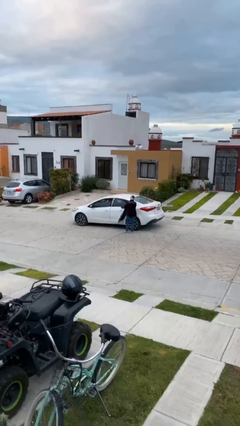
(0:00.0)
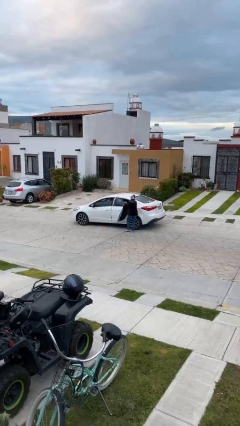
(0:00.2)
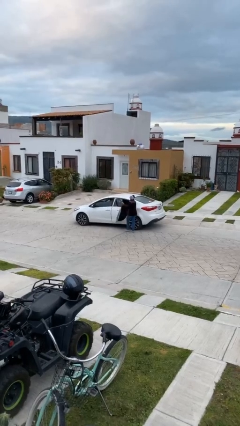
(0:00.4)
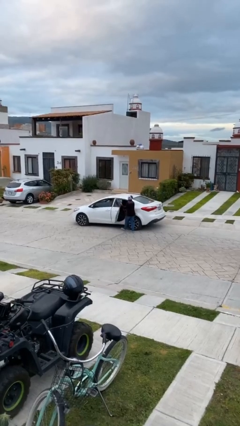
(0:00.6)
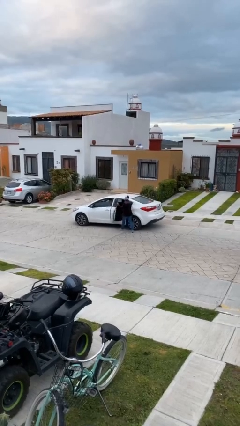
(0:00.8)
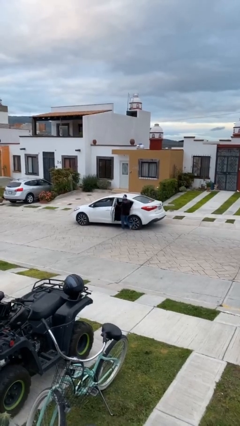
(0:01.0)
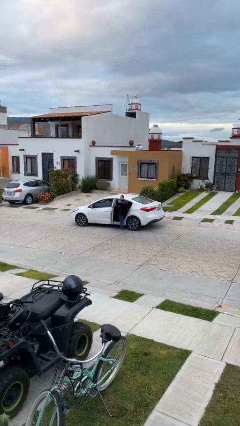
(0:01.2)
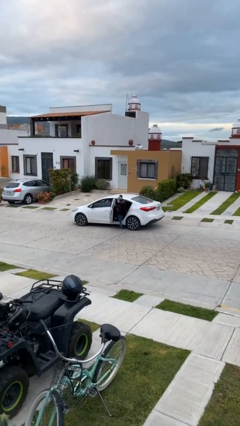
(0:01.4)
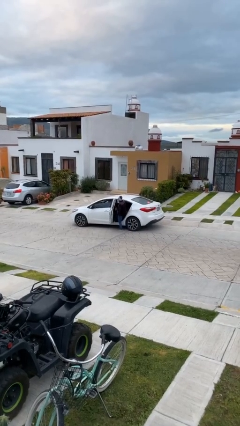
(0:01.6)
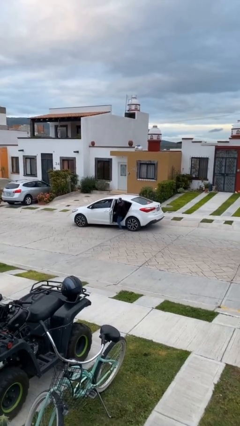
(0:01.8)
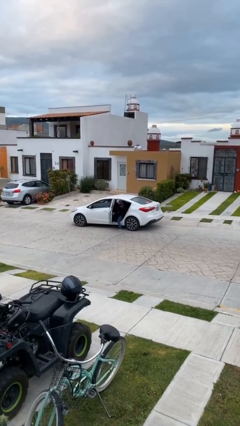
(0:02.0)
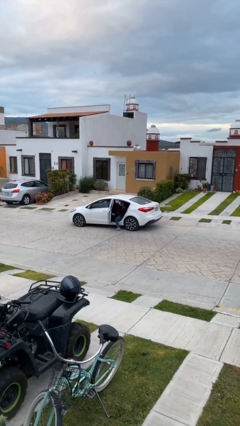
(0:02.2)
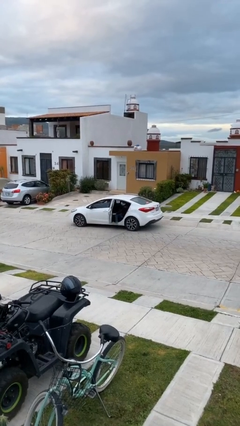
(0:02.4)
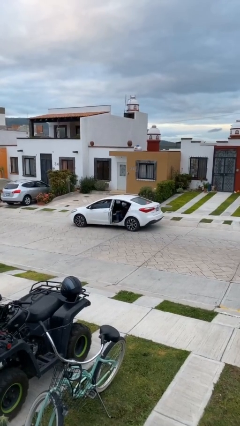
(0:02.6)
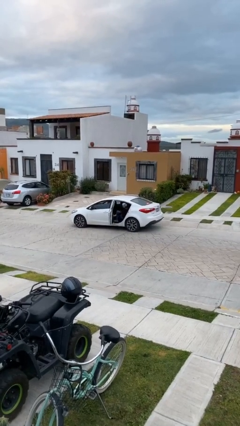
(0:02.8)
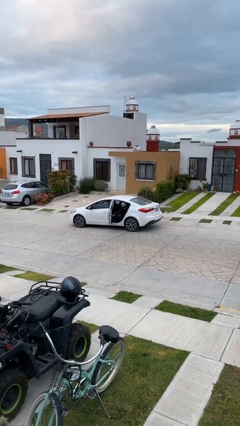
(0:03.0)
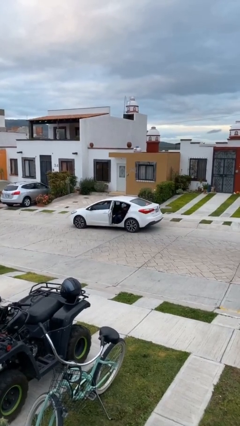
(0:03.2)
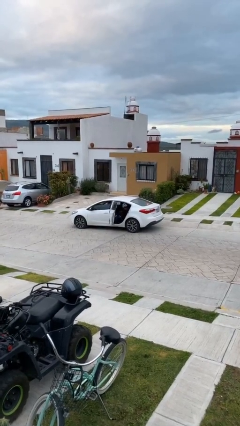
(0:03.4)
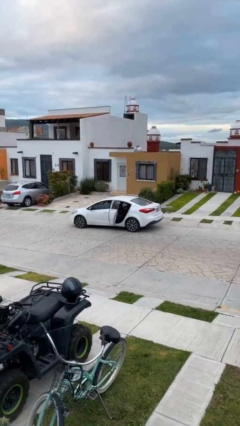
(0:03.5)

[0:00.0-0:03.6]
car picks up person

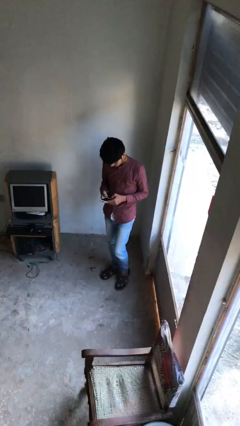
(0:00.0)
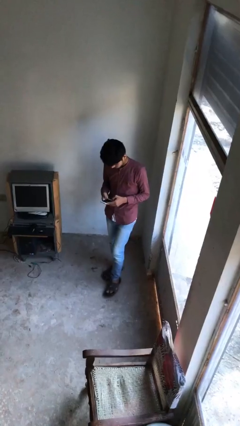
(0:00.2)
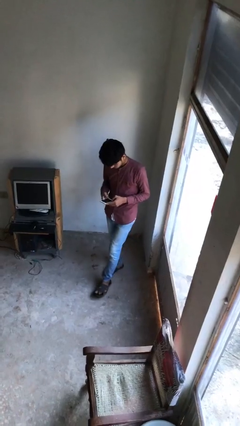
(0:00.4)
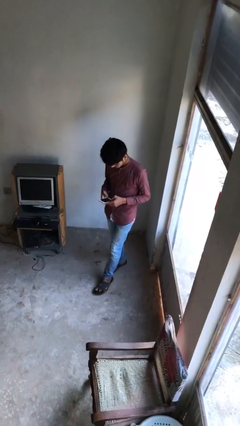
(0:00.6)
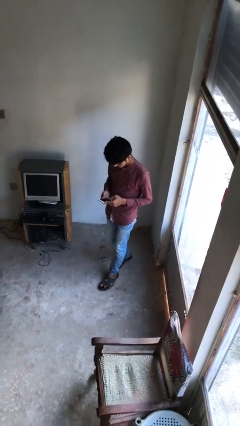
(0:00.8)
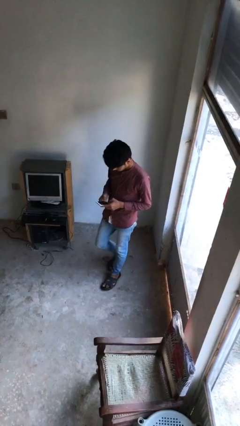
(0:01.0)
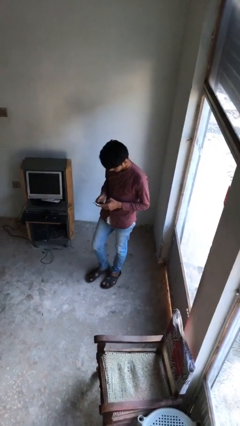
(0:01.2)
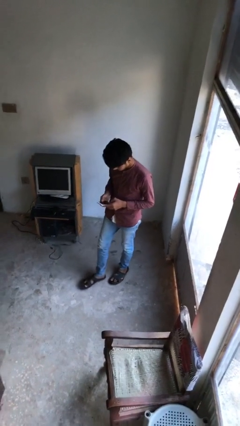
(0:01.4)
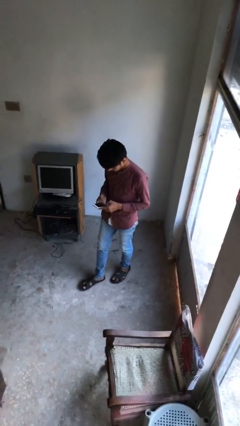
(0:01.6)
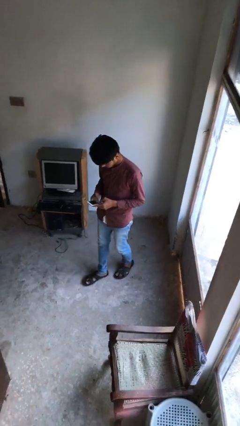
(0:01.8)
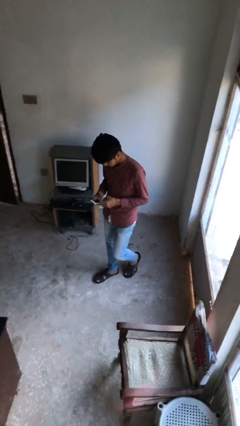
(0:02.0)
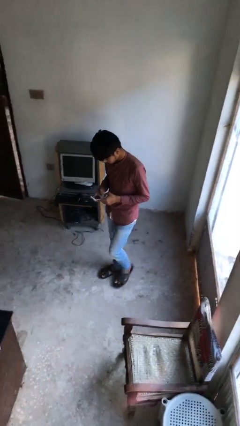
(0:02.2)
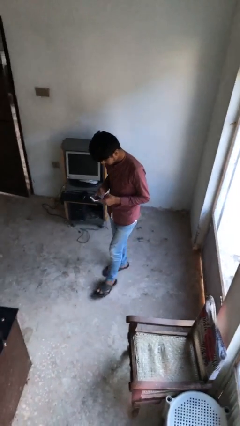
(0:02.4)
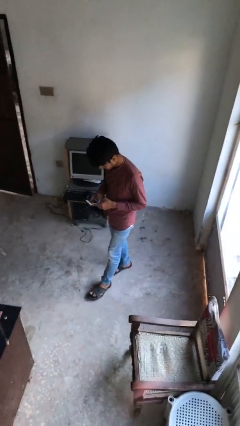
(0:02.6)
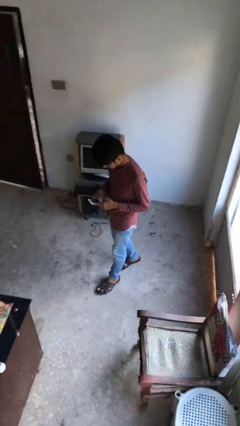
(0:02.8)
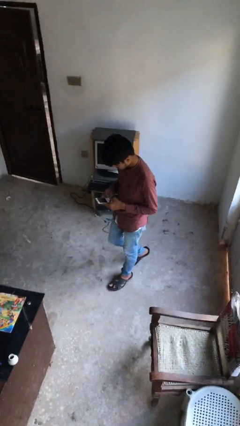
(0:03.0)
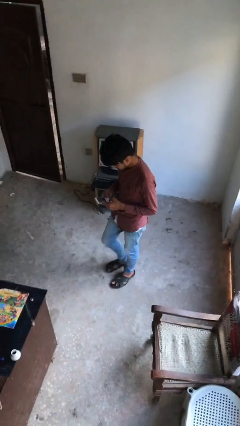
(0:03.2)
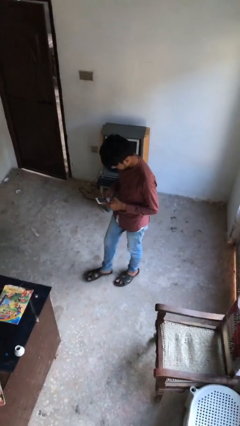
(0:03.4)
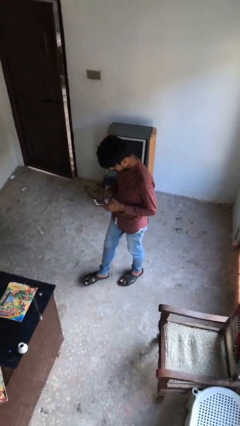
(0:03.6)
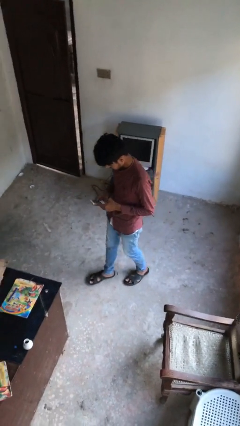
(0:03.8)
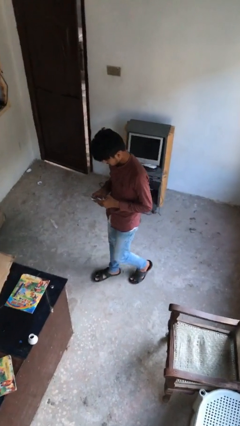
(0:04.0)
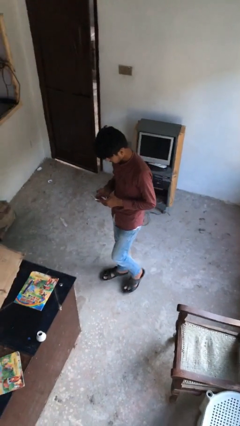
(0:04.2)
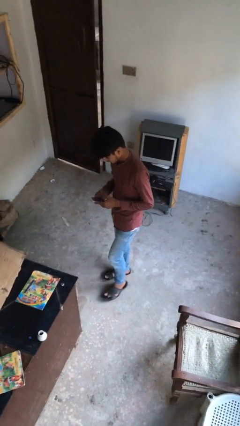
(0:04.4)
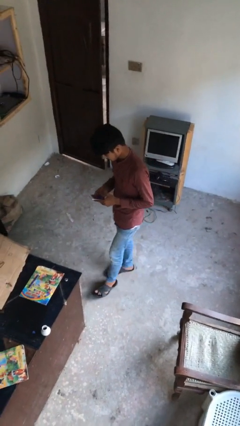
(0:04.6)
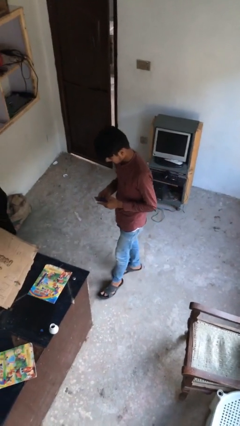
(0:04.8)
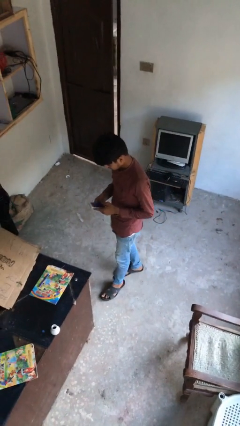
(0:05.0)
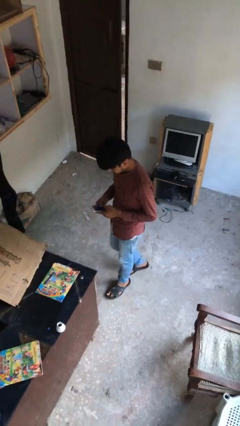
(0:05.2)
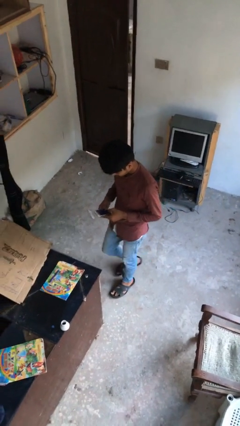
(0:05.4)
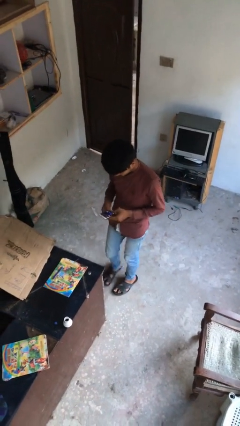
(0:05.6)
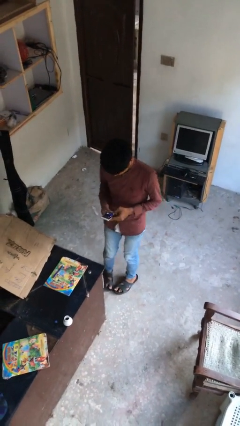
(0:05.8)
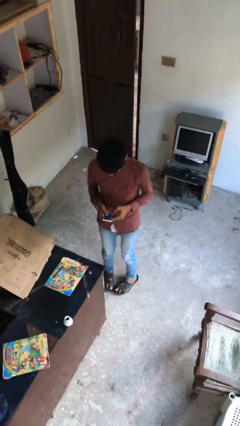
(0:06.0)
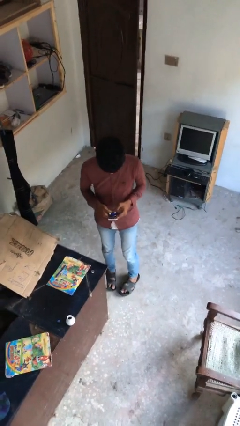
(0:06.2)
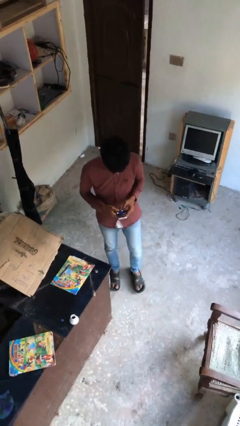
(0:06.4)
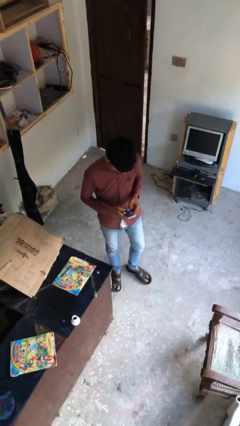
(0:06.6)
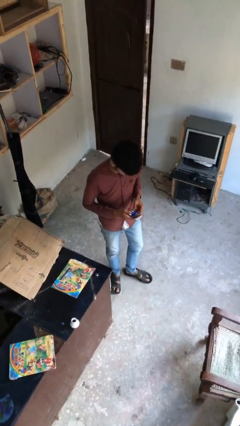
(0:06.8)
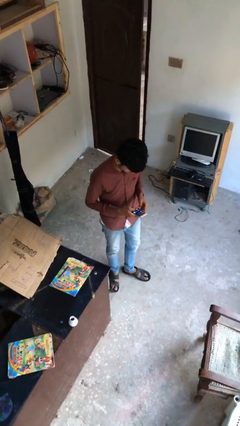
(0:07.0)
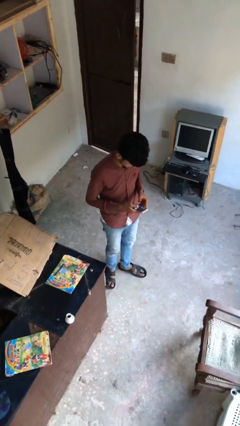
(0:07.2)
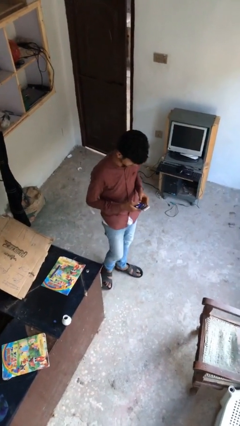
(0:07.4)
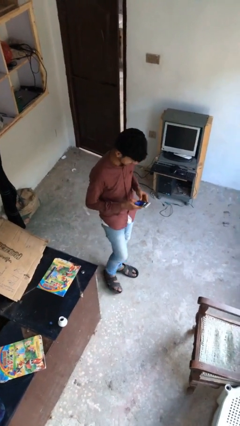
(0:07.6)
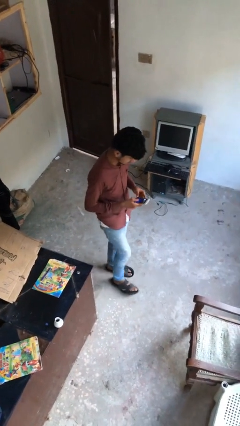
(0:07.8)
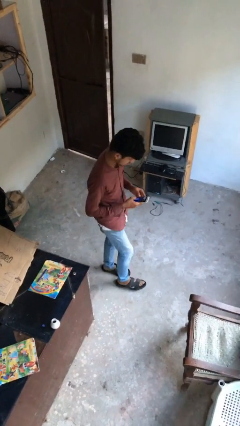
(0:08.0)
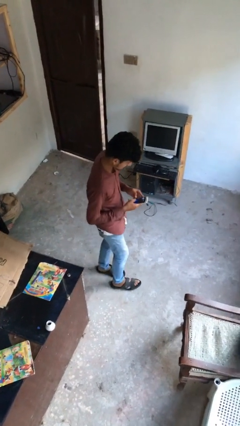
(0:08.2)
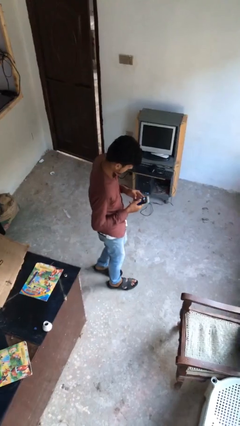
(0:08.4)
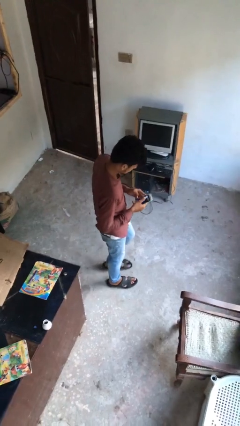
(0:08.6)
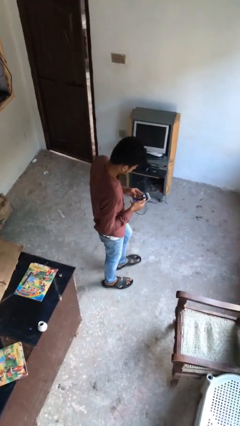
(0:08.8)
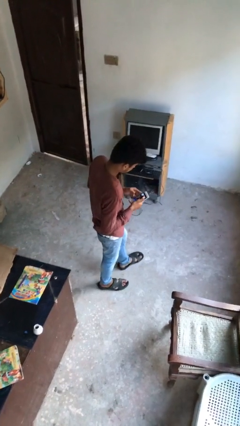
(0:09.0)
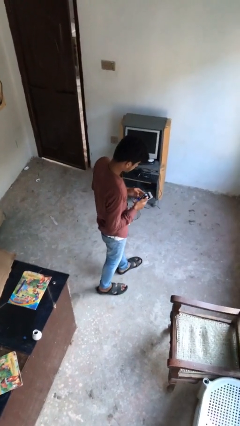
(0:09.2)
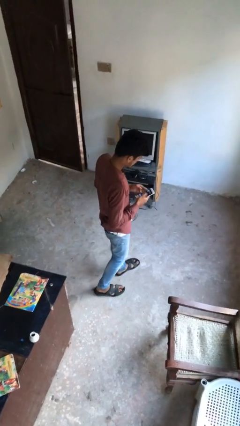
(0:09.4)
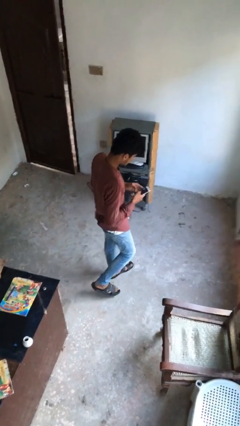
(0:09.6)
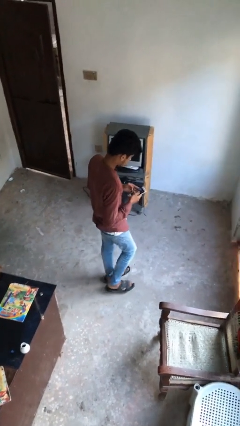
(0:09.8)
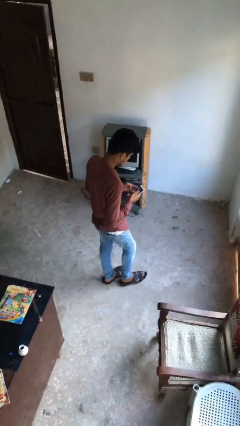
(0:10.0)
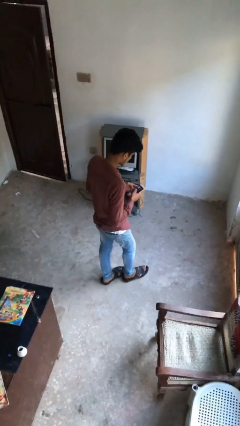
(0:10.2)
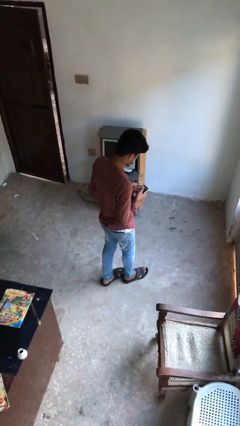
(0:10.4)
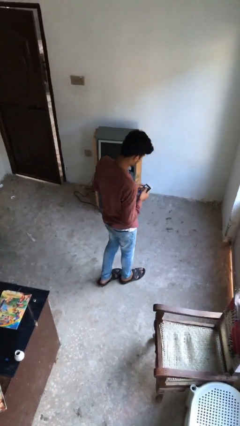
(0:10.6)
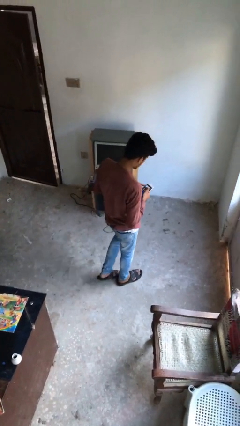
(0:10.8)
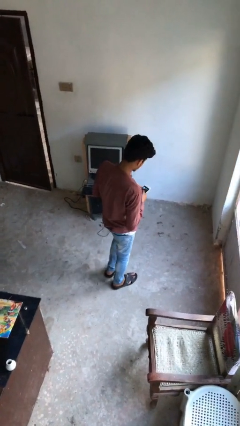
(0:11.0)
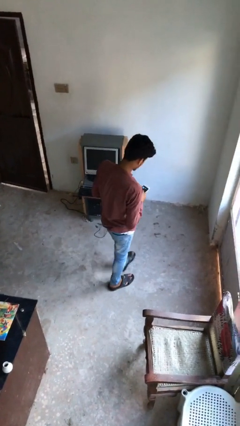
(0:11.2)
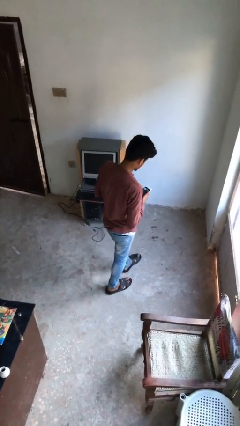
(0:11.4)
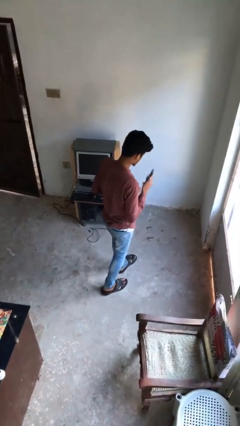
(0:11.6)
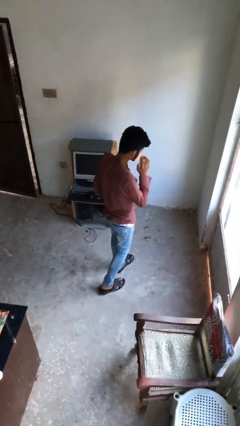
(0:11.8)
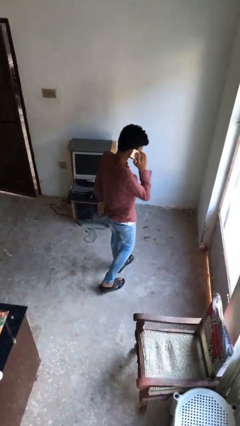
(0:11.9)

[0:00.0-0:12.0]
person texts on phone

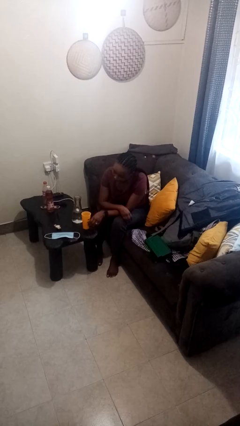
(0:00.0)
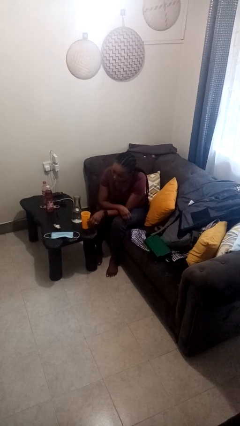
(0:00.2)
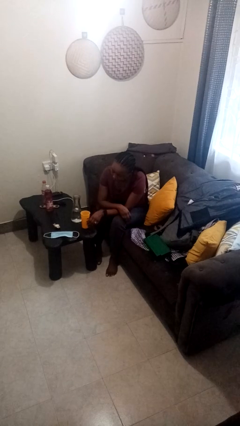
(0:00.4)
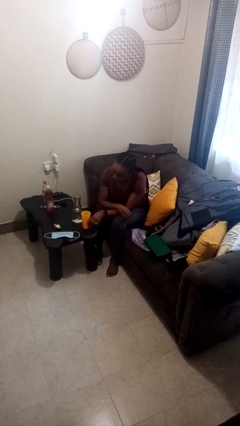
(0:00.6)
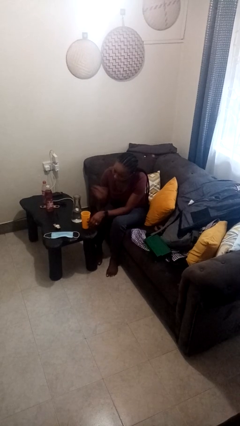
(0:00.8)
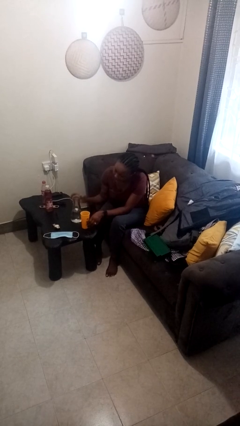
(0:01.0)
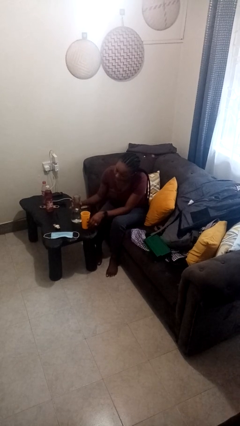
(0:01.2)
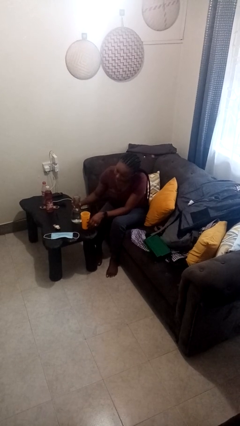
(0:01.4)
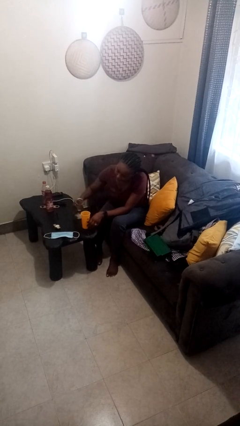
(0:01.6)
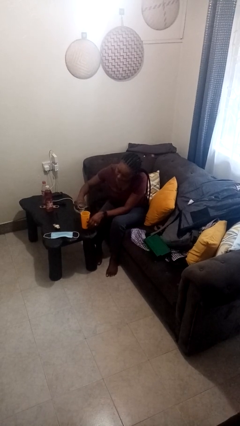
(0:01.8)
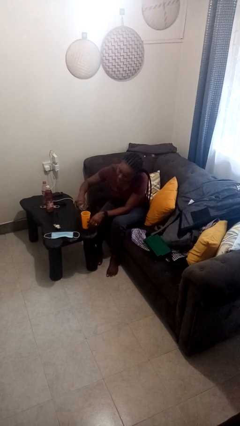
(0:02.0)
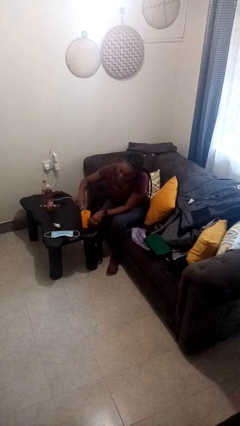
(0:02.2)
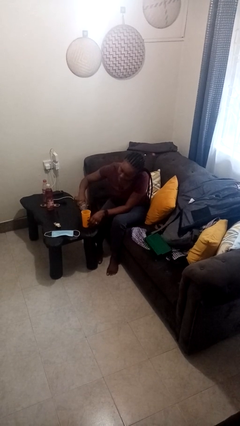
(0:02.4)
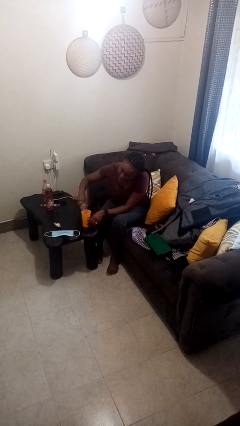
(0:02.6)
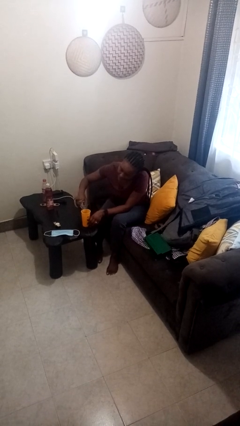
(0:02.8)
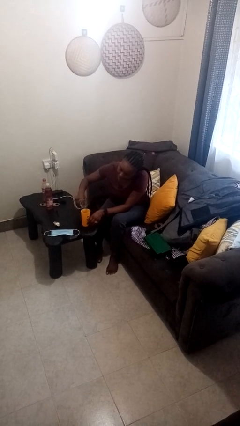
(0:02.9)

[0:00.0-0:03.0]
person pours liquid into cup
